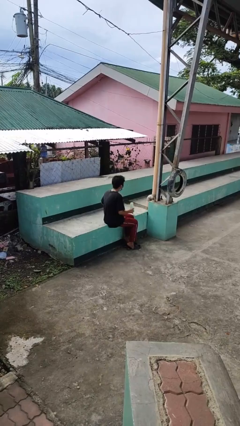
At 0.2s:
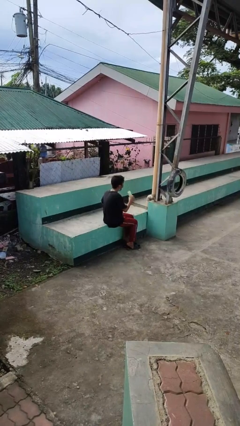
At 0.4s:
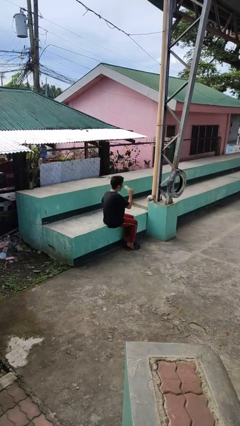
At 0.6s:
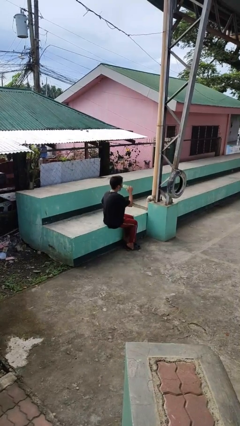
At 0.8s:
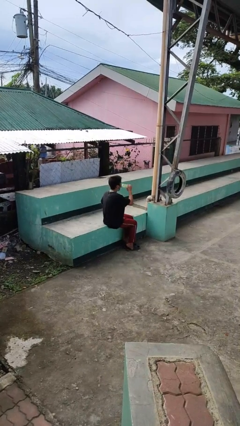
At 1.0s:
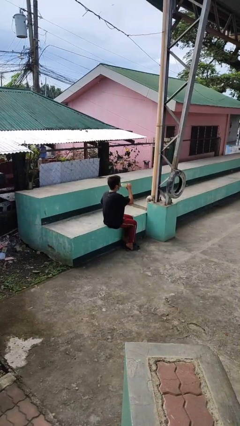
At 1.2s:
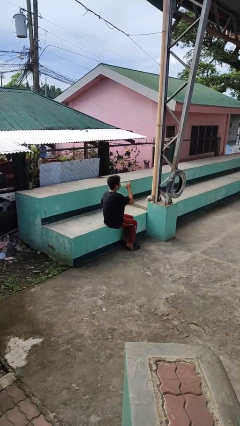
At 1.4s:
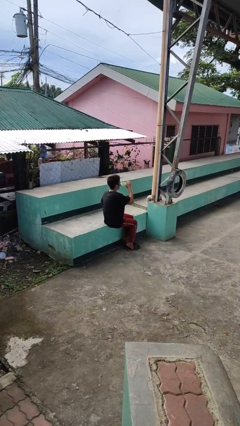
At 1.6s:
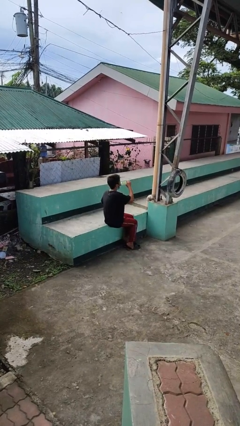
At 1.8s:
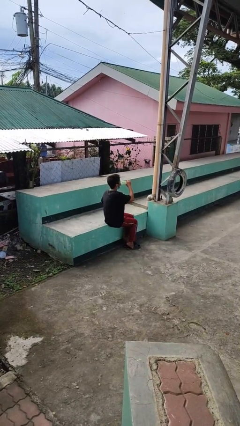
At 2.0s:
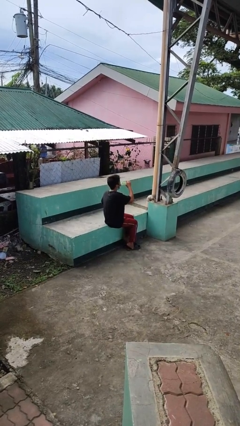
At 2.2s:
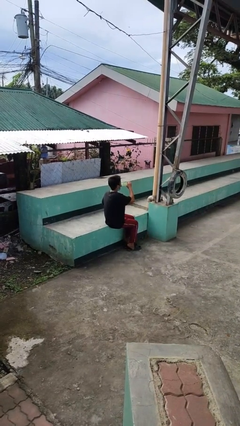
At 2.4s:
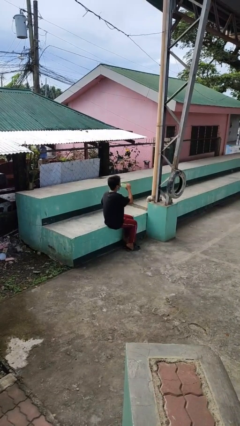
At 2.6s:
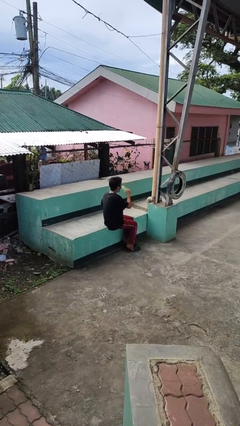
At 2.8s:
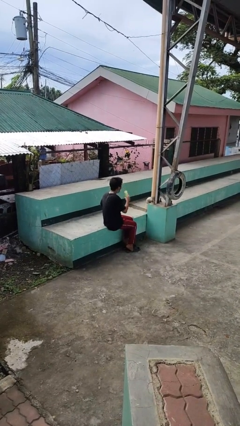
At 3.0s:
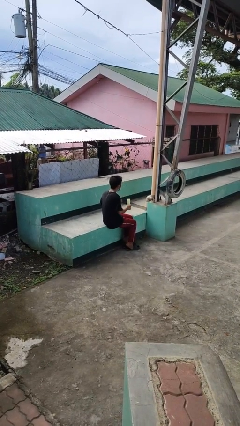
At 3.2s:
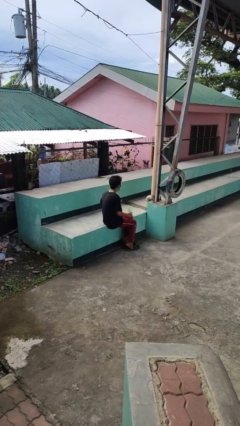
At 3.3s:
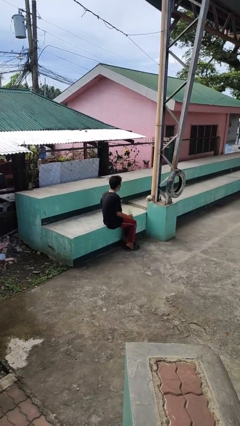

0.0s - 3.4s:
person drinks from bottle

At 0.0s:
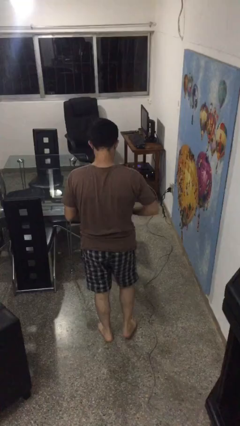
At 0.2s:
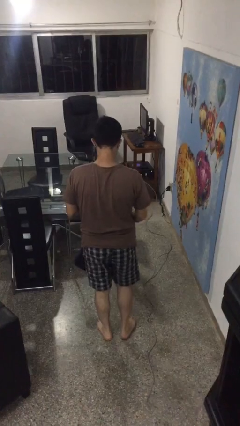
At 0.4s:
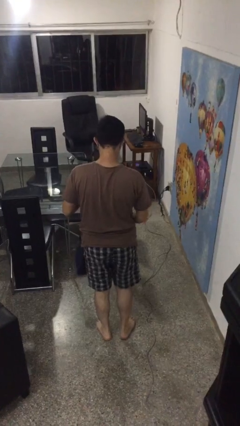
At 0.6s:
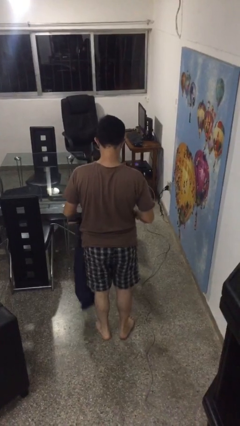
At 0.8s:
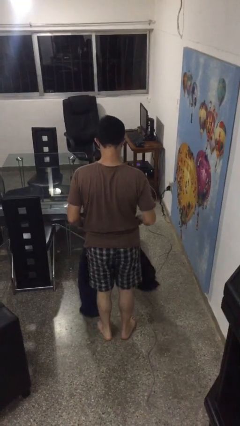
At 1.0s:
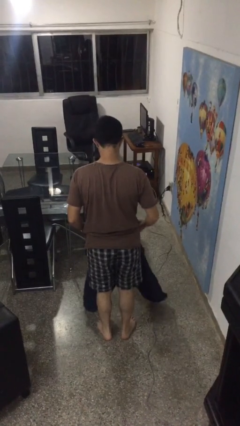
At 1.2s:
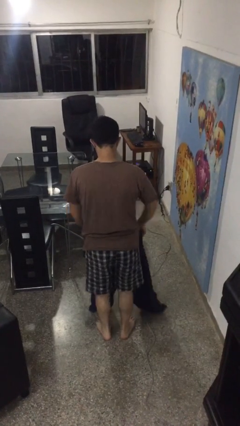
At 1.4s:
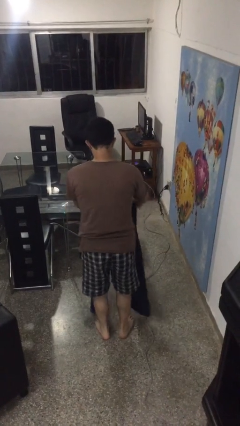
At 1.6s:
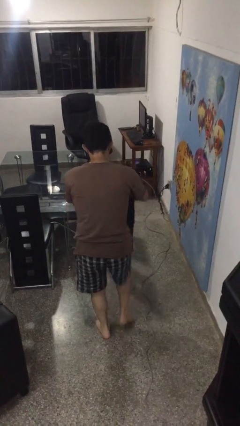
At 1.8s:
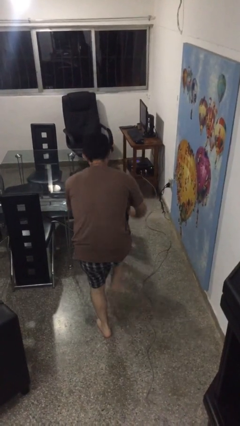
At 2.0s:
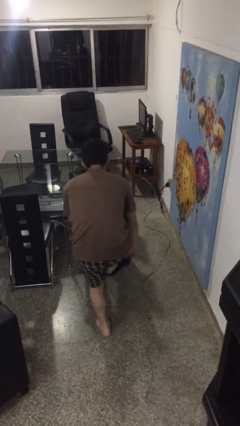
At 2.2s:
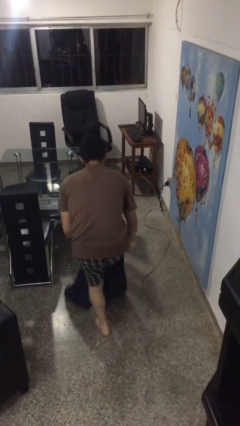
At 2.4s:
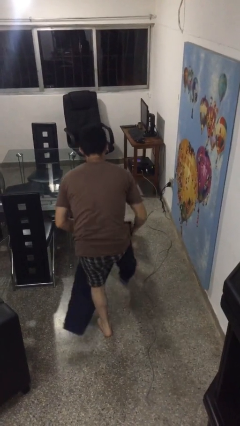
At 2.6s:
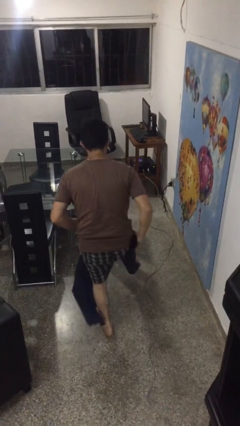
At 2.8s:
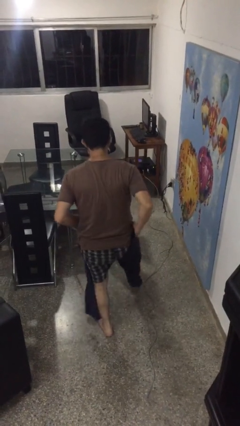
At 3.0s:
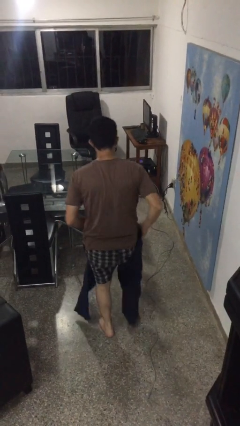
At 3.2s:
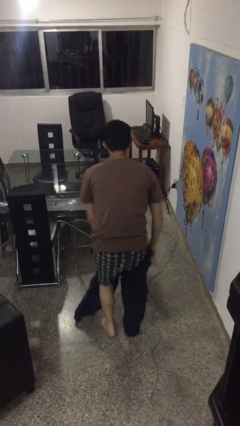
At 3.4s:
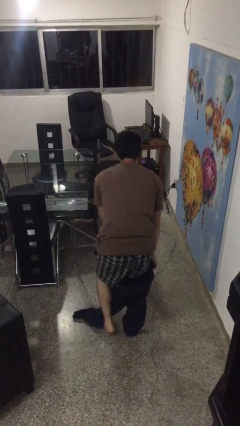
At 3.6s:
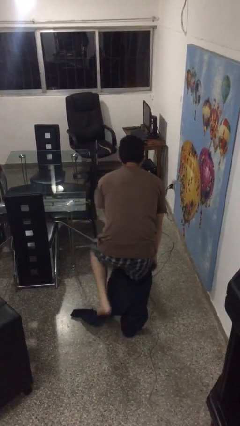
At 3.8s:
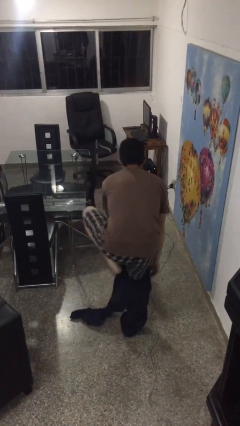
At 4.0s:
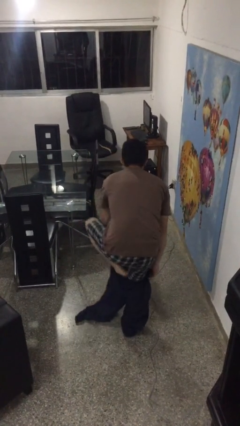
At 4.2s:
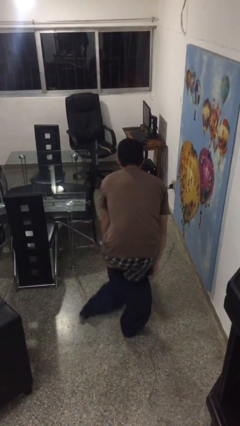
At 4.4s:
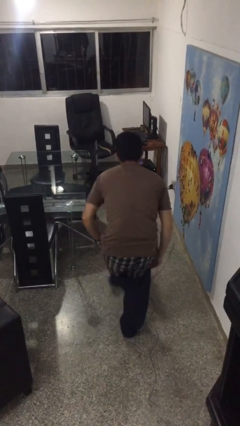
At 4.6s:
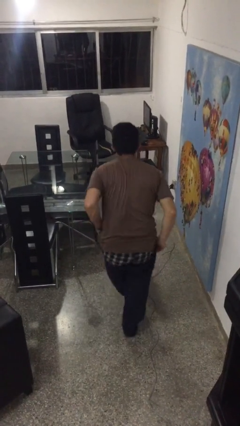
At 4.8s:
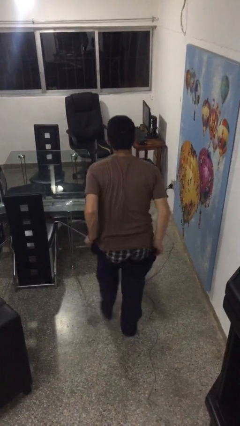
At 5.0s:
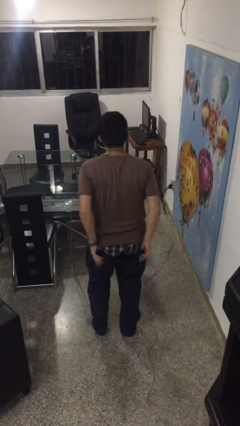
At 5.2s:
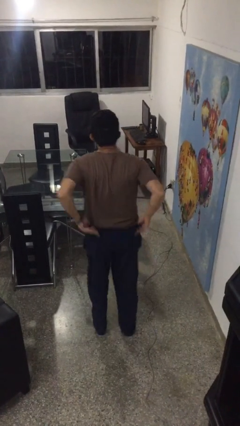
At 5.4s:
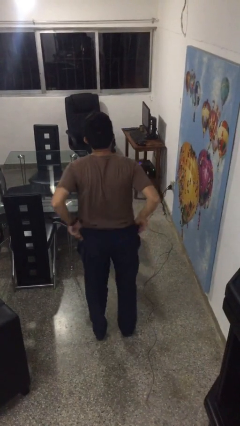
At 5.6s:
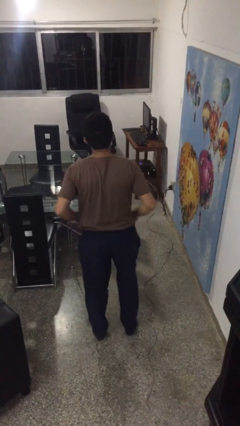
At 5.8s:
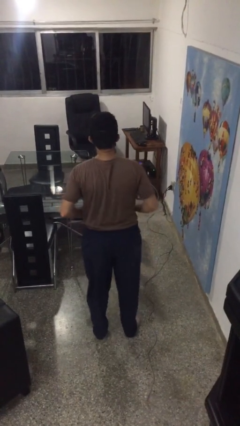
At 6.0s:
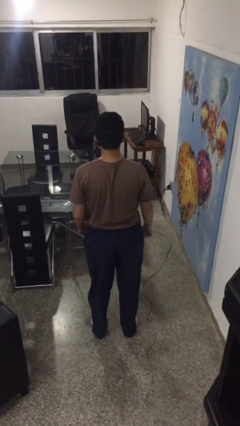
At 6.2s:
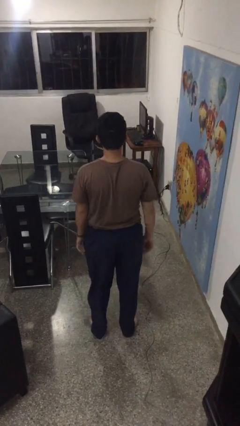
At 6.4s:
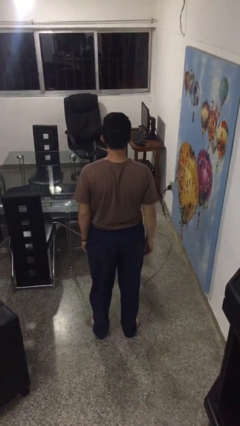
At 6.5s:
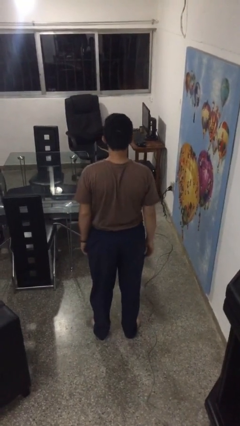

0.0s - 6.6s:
person puts on pants

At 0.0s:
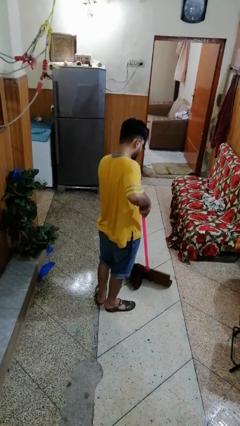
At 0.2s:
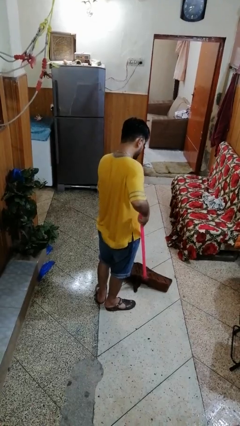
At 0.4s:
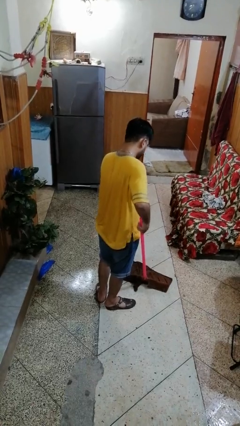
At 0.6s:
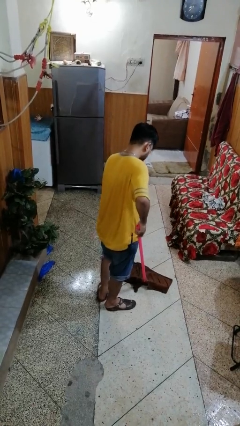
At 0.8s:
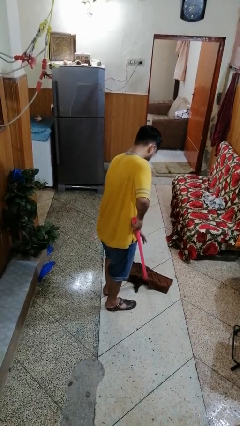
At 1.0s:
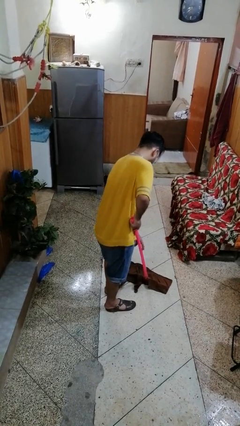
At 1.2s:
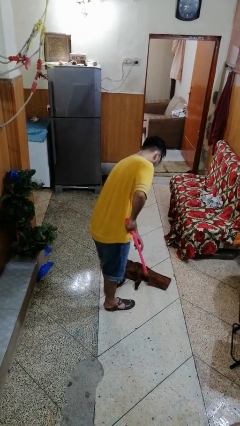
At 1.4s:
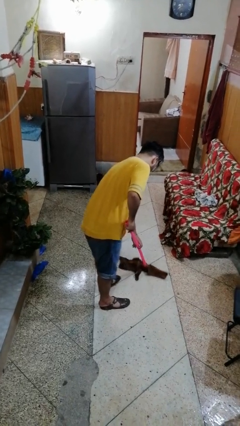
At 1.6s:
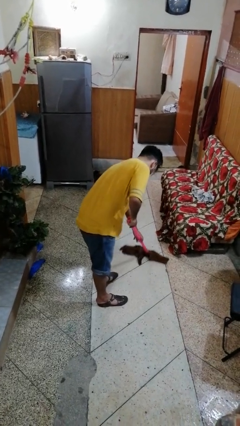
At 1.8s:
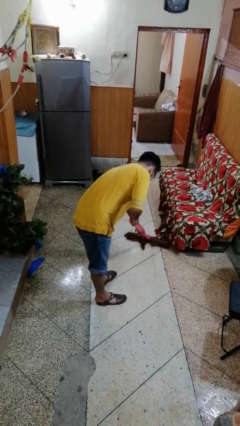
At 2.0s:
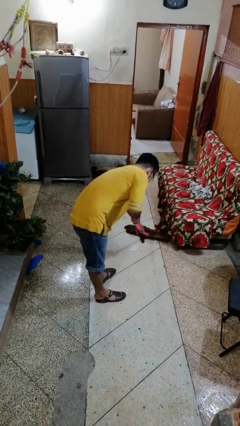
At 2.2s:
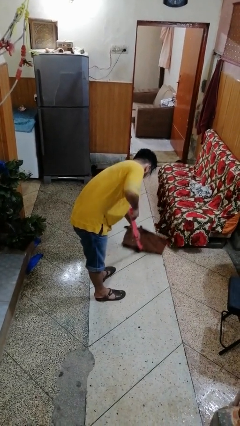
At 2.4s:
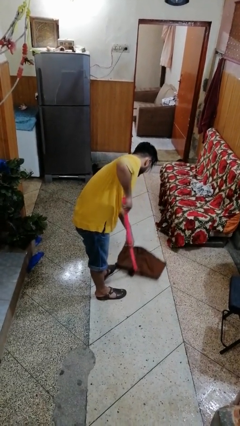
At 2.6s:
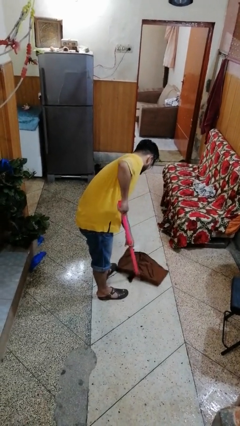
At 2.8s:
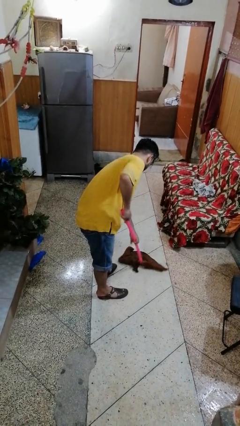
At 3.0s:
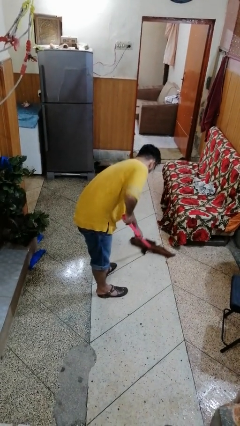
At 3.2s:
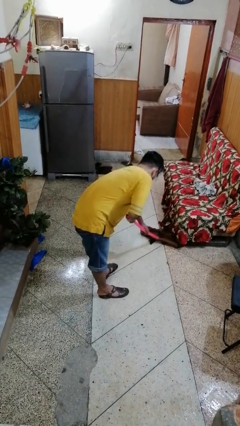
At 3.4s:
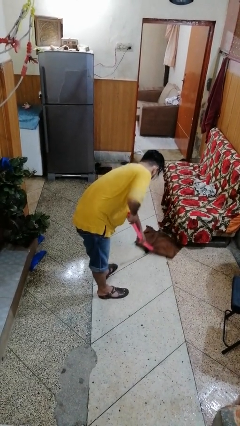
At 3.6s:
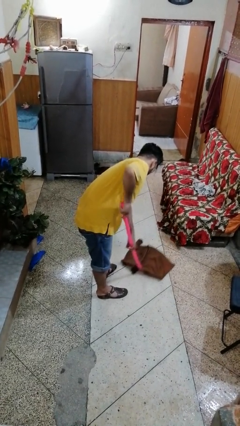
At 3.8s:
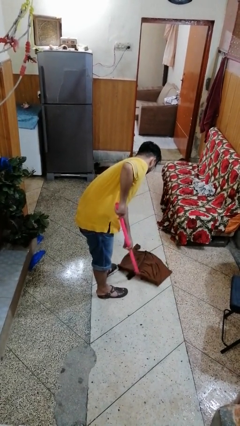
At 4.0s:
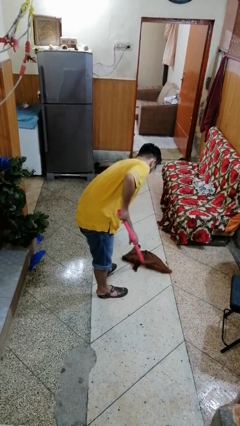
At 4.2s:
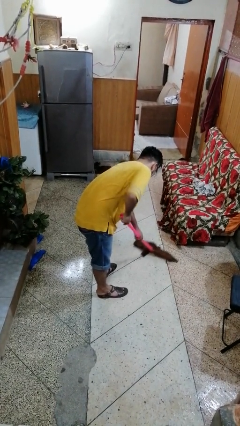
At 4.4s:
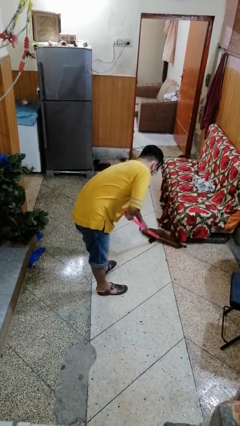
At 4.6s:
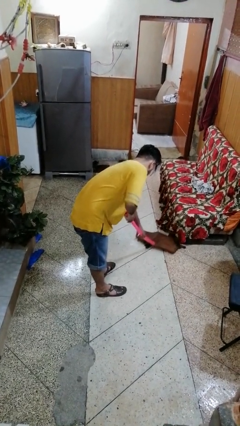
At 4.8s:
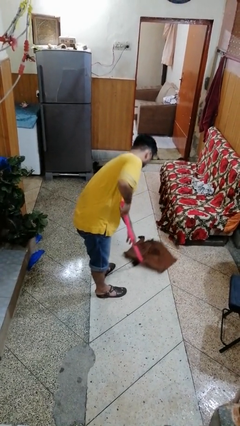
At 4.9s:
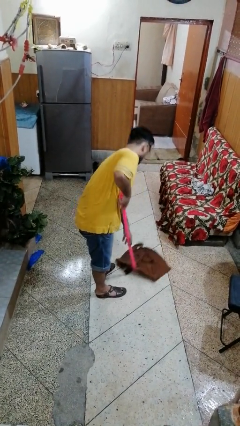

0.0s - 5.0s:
person mops

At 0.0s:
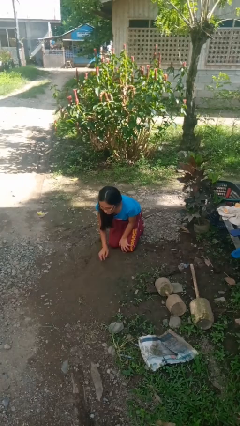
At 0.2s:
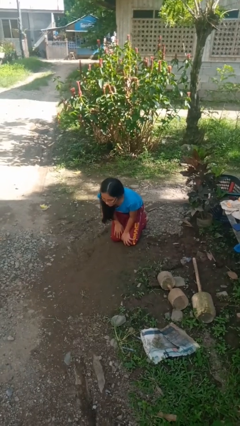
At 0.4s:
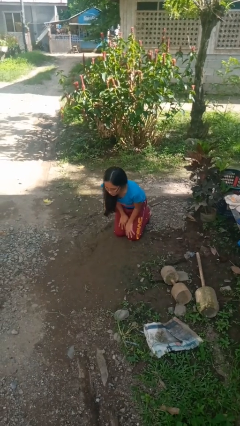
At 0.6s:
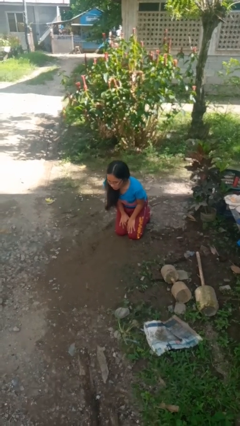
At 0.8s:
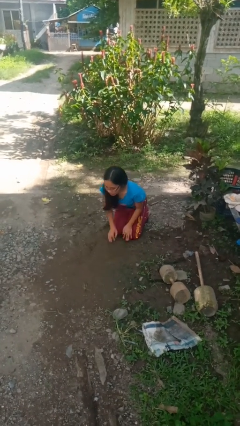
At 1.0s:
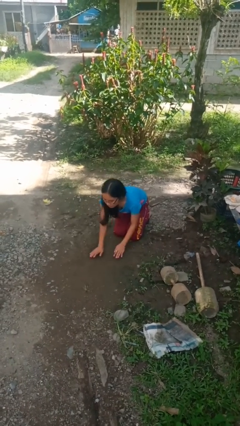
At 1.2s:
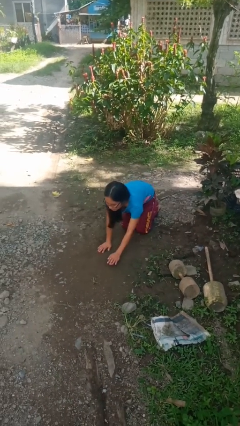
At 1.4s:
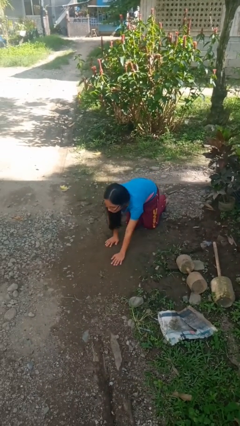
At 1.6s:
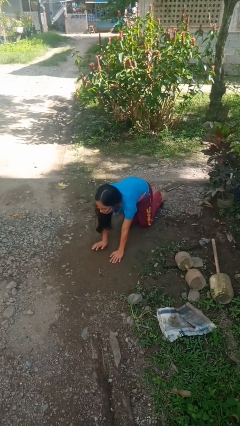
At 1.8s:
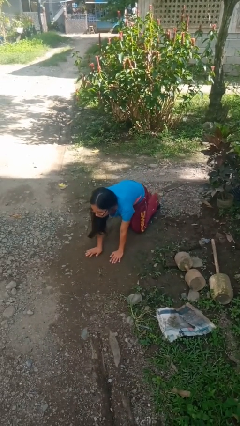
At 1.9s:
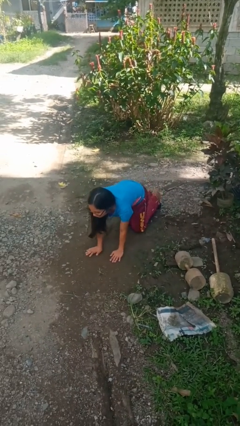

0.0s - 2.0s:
person crawls

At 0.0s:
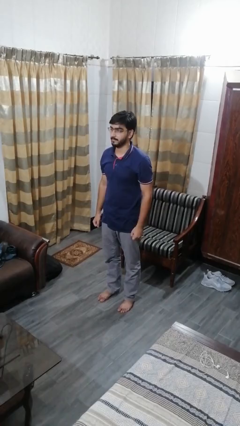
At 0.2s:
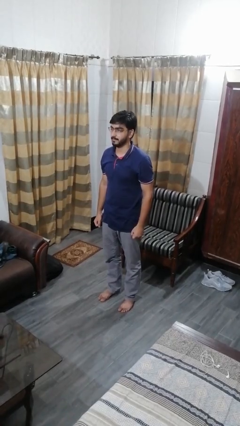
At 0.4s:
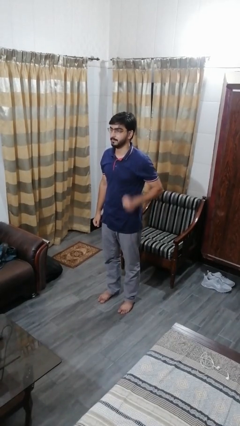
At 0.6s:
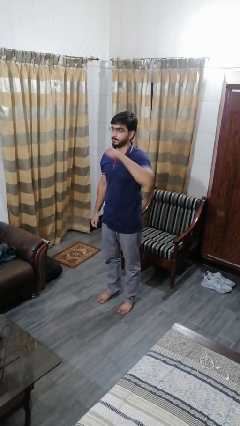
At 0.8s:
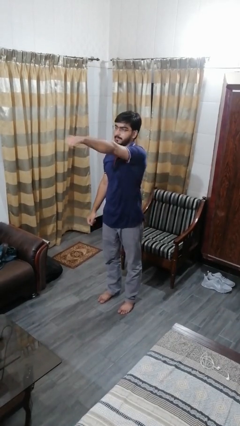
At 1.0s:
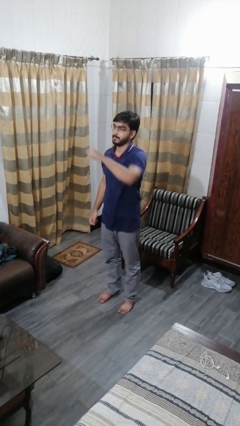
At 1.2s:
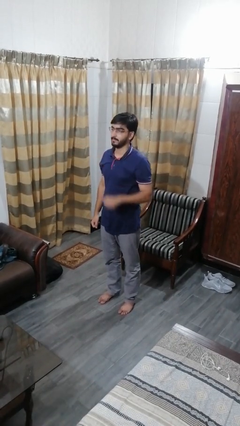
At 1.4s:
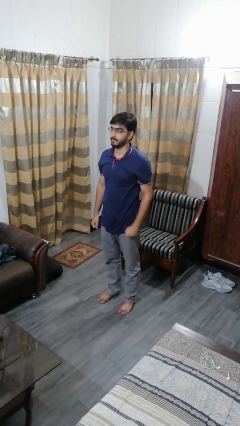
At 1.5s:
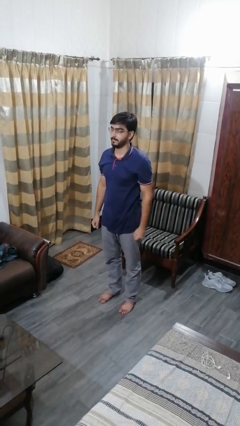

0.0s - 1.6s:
person punches
